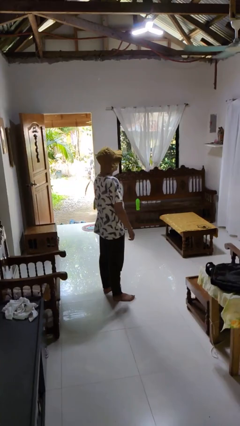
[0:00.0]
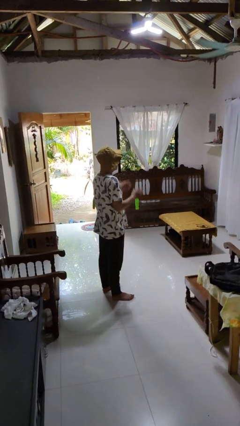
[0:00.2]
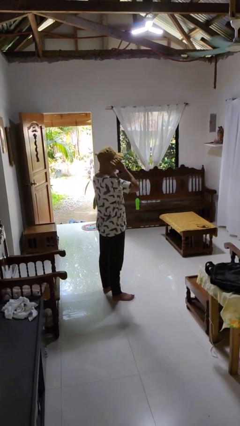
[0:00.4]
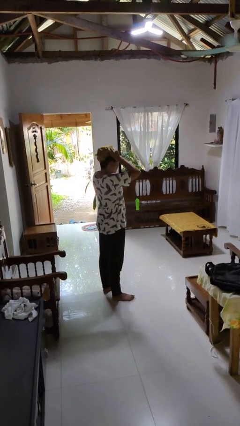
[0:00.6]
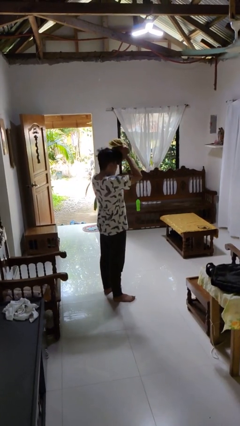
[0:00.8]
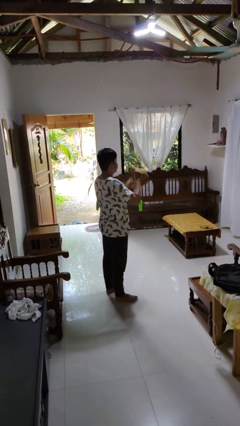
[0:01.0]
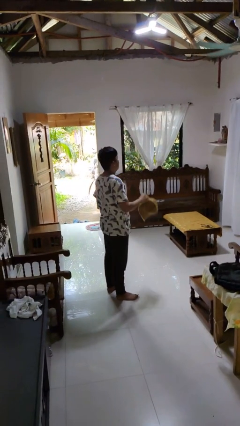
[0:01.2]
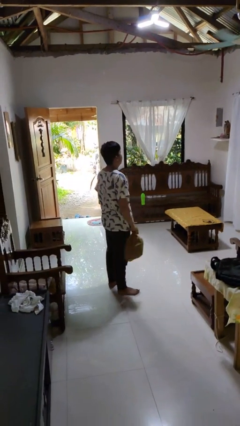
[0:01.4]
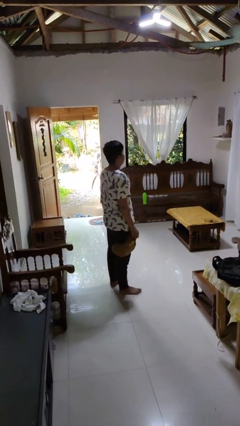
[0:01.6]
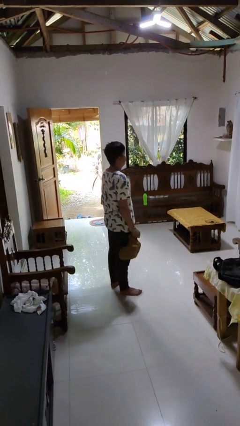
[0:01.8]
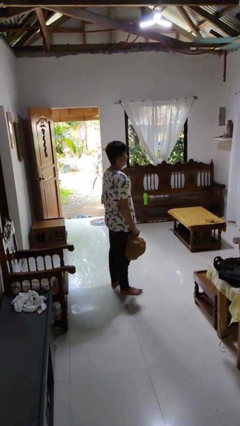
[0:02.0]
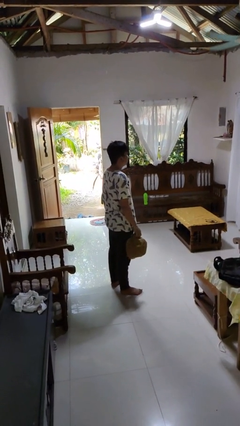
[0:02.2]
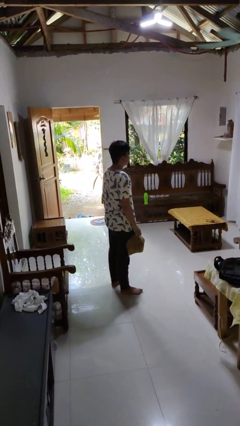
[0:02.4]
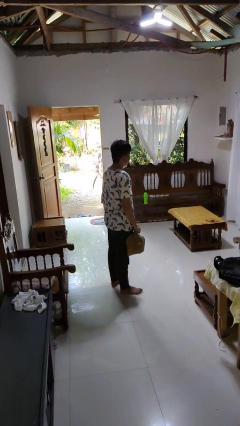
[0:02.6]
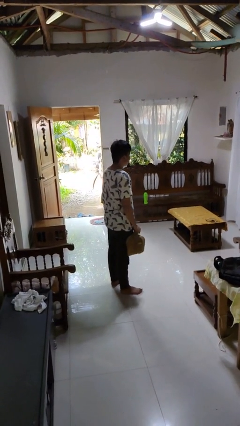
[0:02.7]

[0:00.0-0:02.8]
person takes off hat

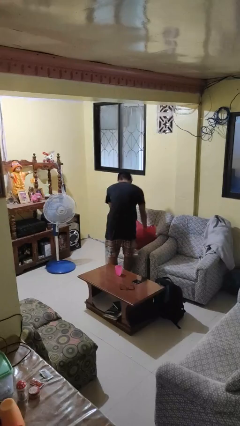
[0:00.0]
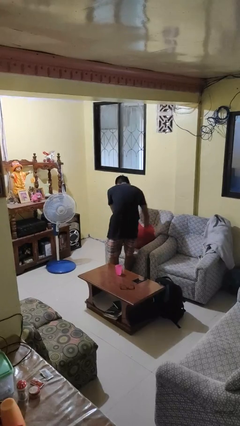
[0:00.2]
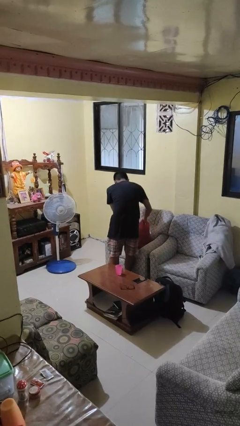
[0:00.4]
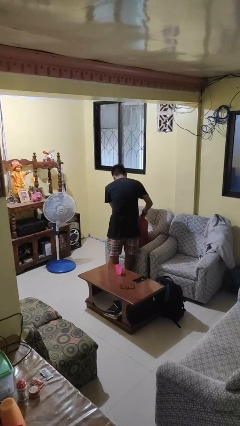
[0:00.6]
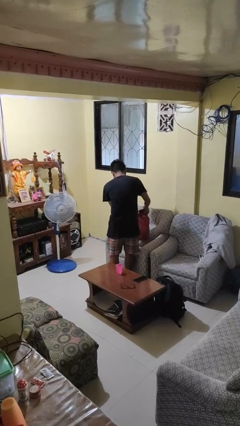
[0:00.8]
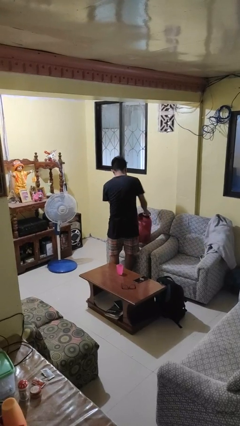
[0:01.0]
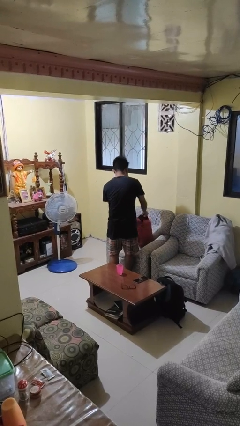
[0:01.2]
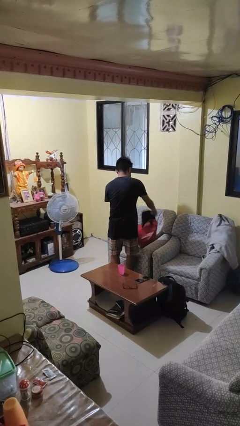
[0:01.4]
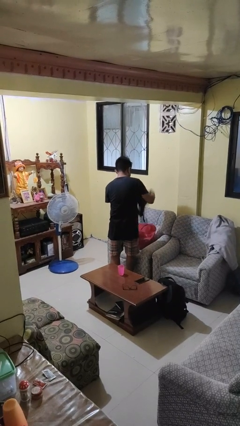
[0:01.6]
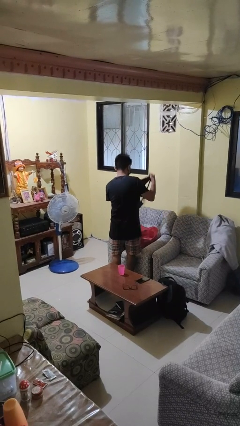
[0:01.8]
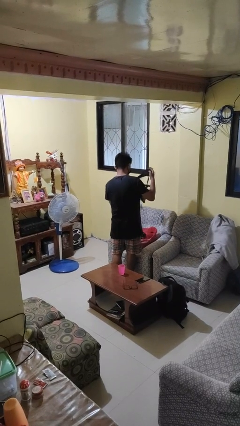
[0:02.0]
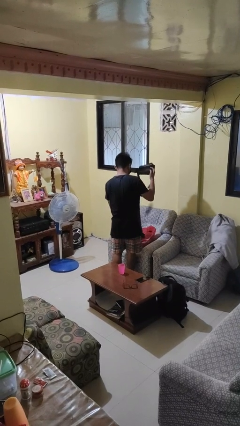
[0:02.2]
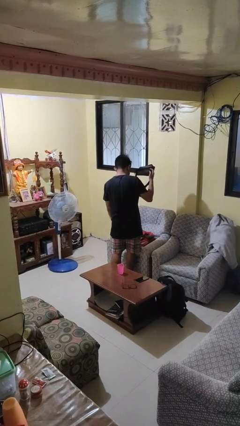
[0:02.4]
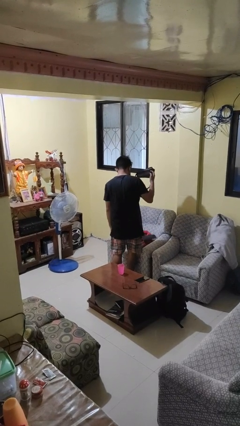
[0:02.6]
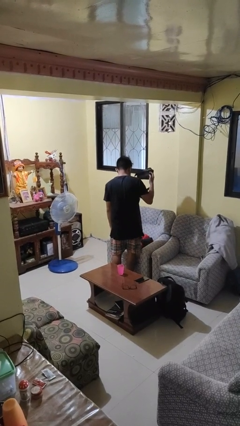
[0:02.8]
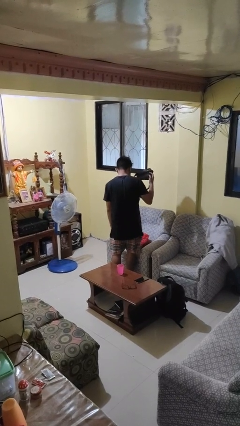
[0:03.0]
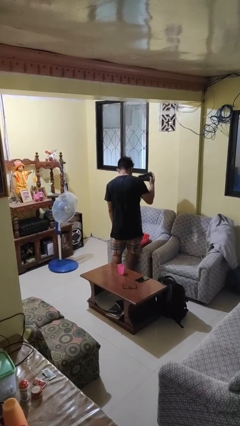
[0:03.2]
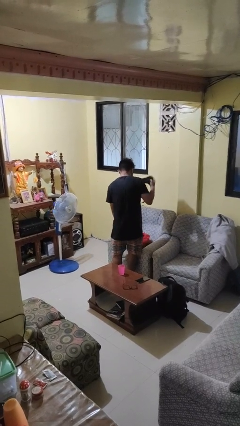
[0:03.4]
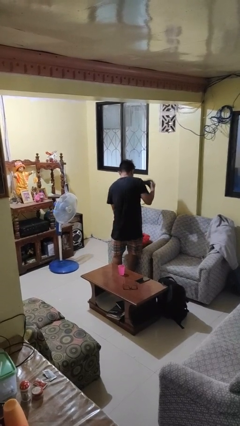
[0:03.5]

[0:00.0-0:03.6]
person takes object from bag

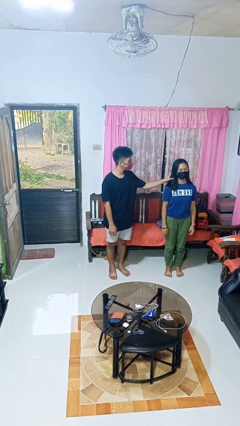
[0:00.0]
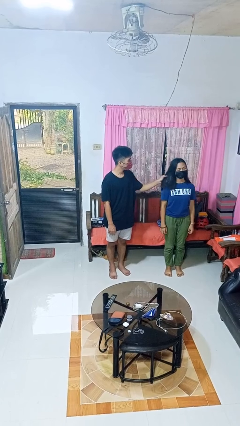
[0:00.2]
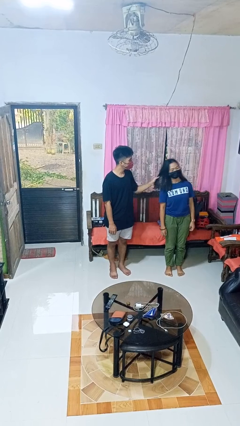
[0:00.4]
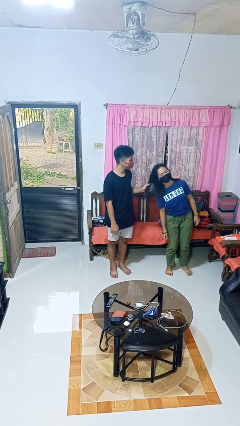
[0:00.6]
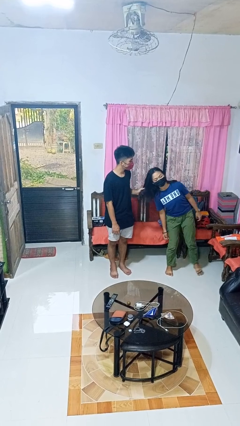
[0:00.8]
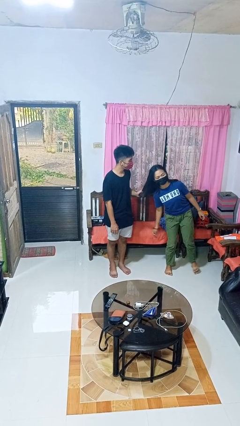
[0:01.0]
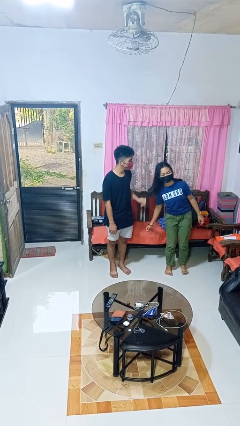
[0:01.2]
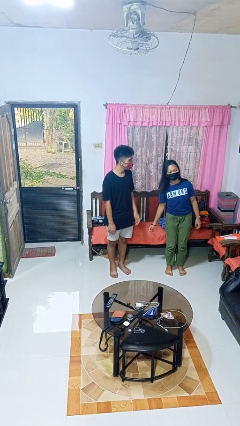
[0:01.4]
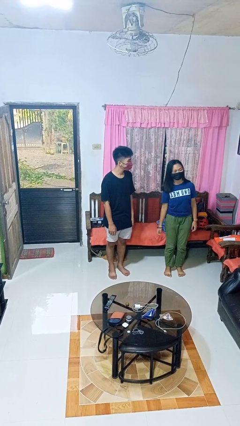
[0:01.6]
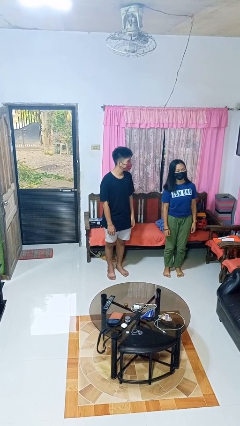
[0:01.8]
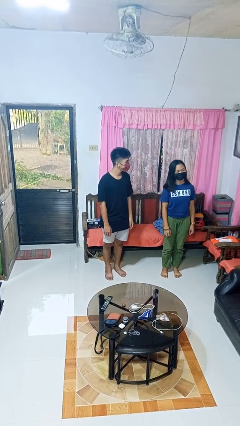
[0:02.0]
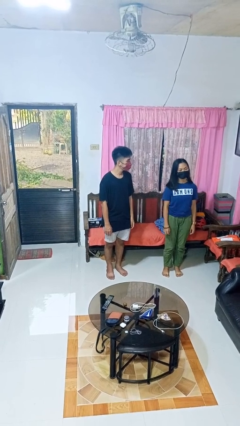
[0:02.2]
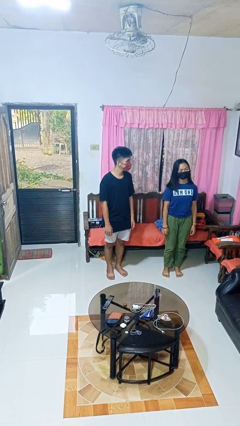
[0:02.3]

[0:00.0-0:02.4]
person grabs person by hair

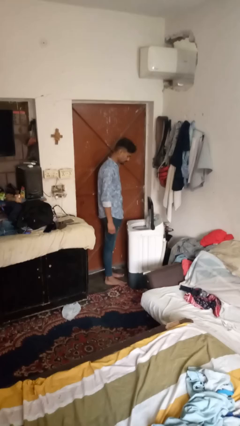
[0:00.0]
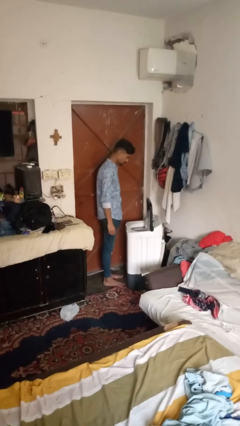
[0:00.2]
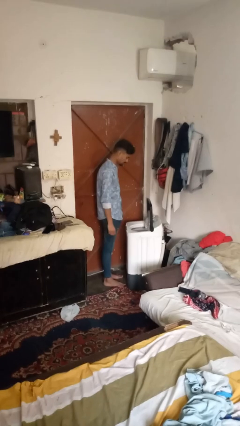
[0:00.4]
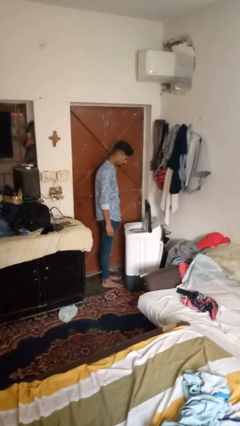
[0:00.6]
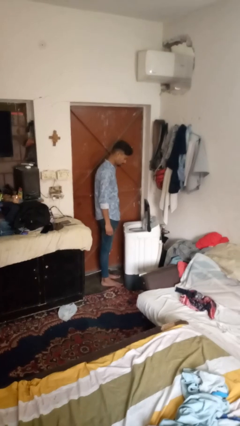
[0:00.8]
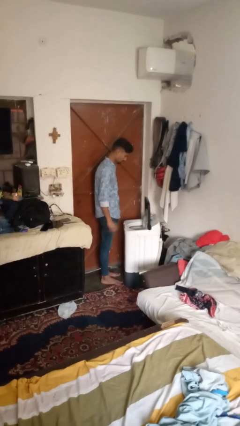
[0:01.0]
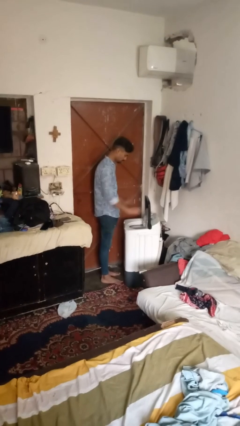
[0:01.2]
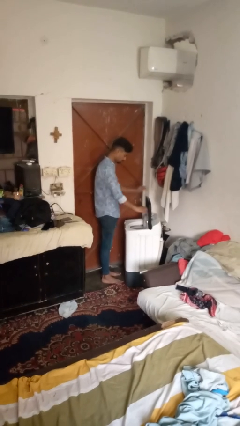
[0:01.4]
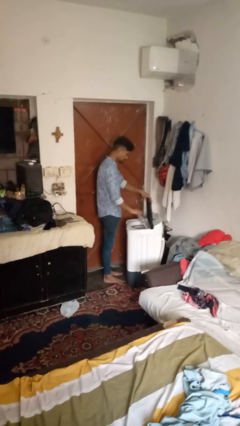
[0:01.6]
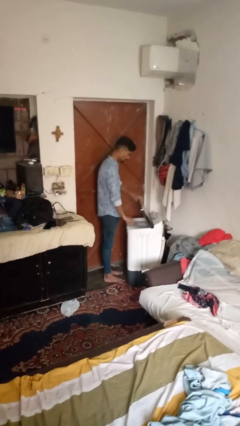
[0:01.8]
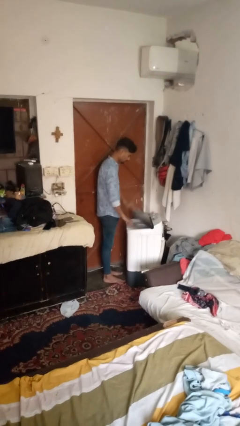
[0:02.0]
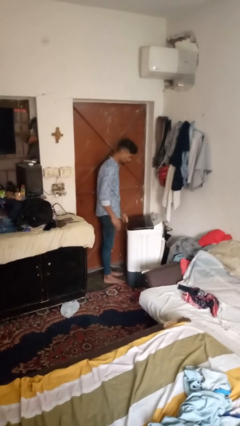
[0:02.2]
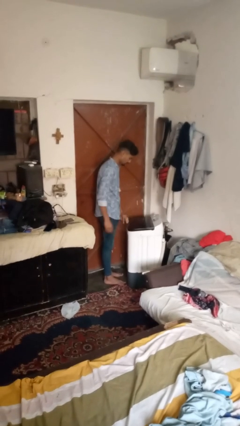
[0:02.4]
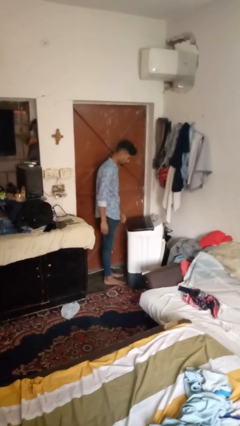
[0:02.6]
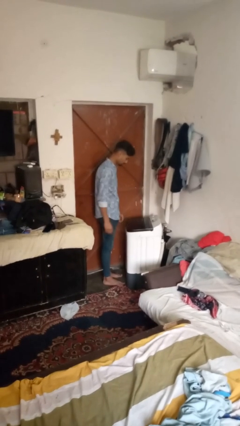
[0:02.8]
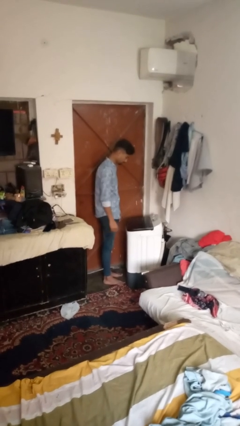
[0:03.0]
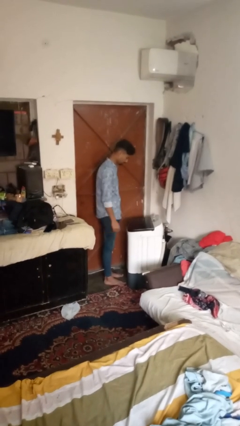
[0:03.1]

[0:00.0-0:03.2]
person closes clothes washer

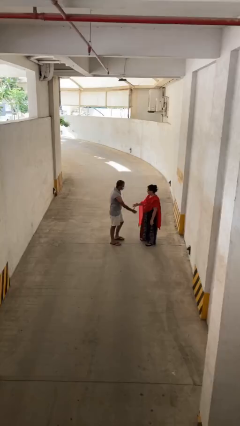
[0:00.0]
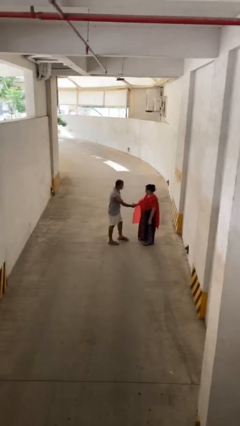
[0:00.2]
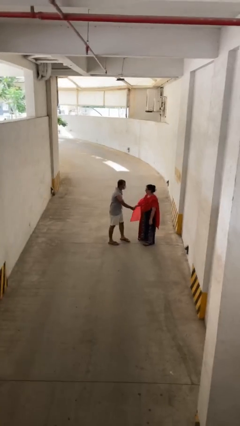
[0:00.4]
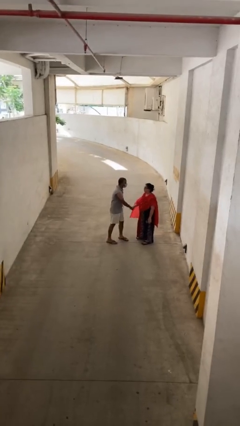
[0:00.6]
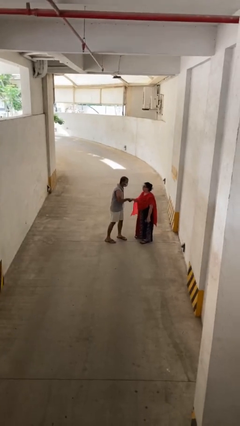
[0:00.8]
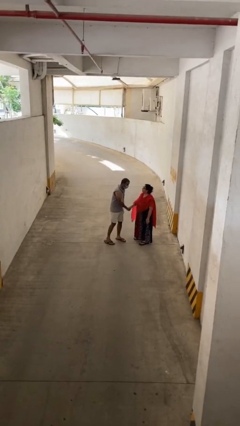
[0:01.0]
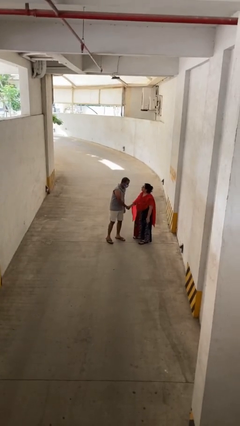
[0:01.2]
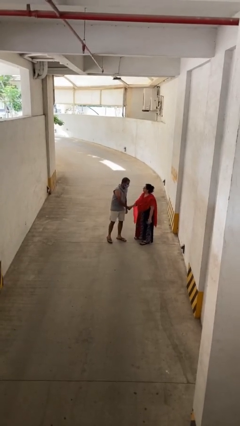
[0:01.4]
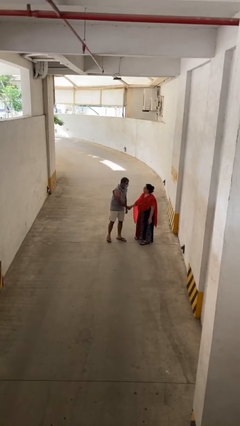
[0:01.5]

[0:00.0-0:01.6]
person shakes hand

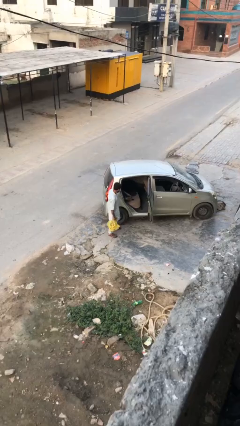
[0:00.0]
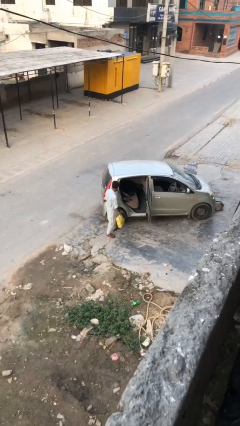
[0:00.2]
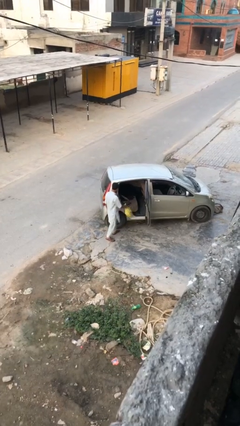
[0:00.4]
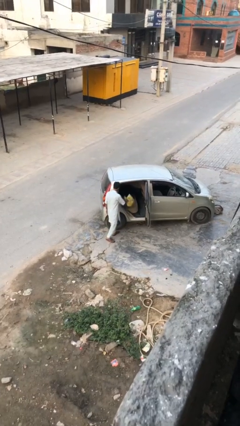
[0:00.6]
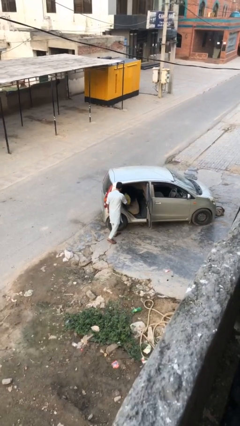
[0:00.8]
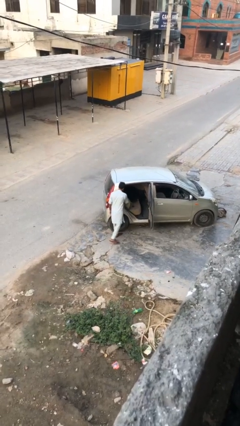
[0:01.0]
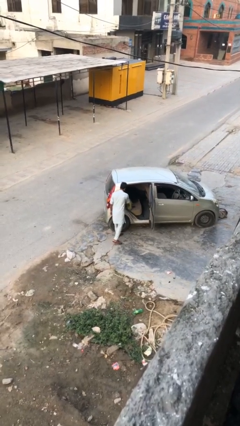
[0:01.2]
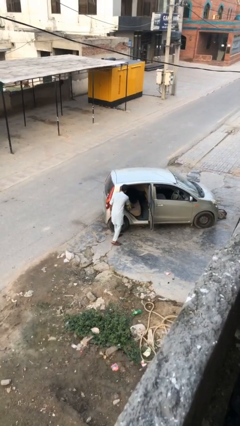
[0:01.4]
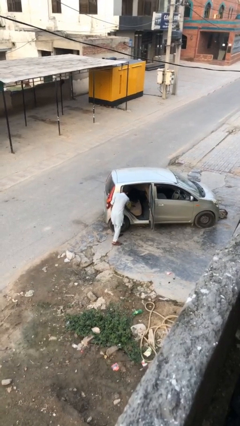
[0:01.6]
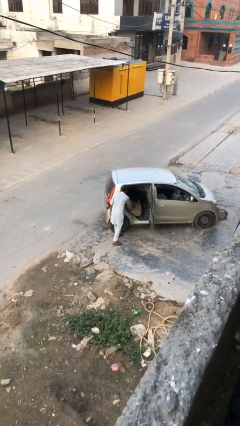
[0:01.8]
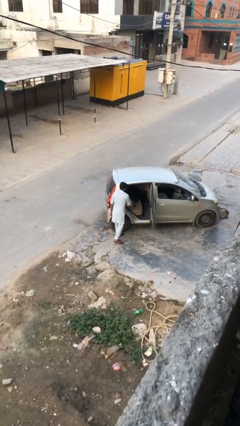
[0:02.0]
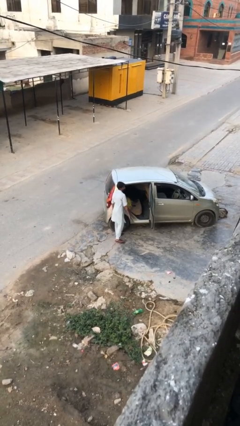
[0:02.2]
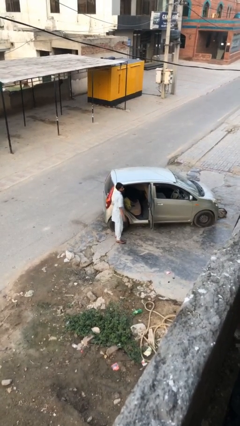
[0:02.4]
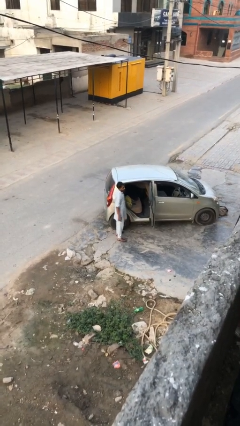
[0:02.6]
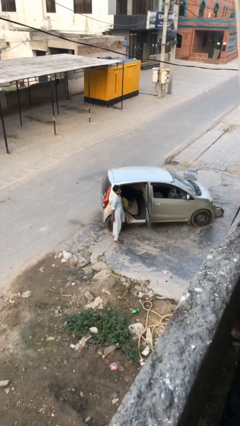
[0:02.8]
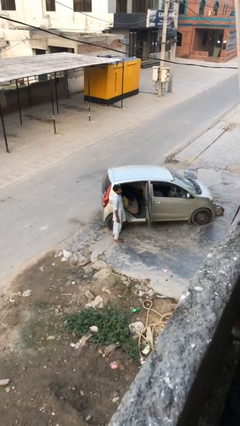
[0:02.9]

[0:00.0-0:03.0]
person loads car

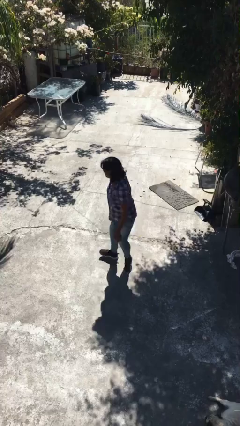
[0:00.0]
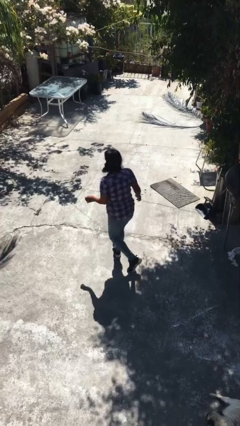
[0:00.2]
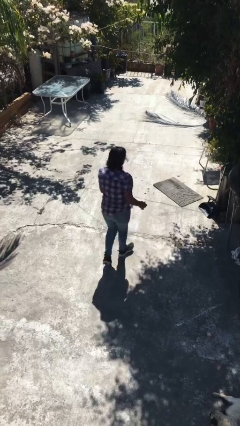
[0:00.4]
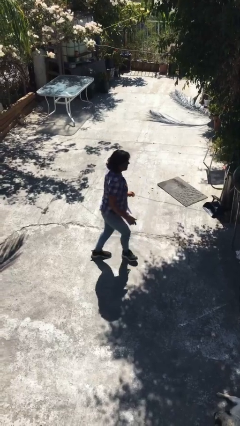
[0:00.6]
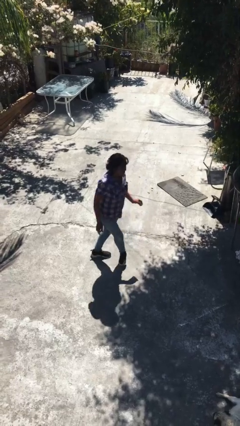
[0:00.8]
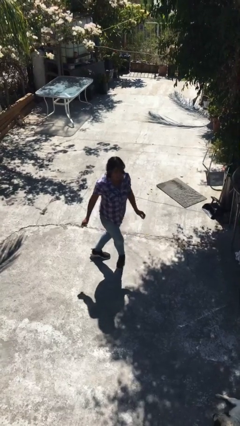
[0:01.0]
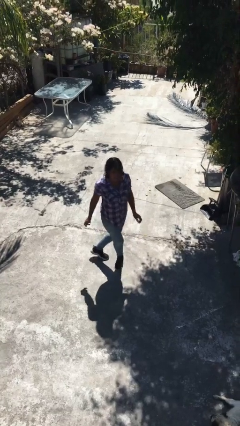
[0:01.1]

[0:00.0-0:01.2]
person twirls
